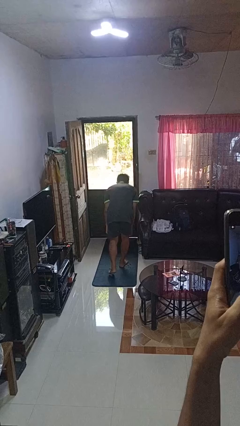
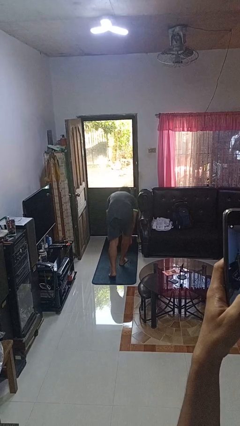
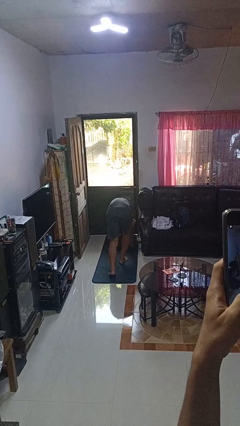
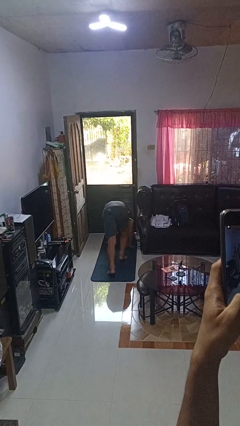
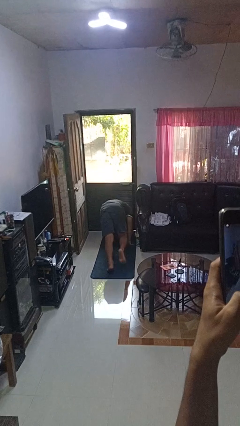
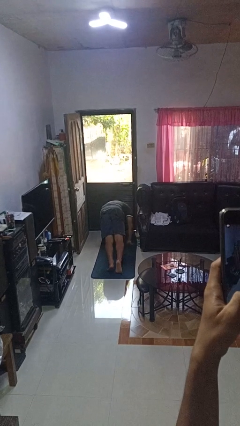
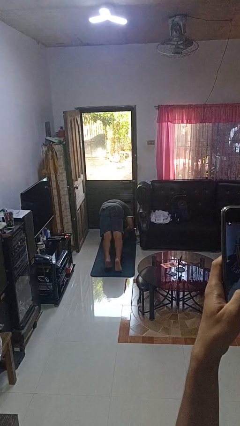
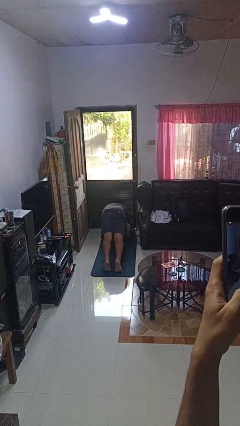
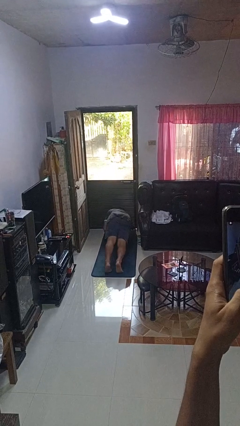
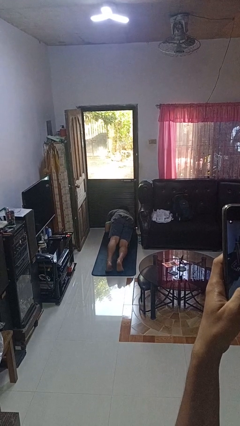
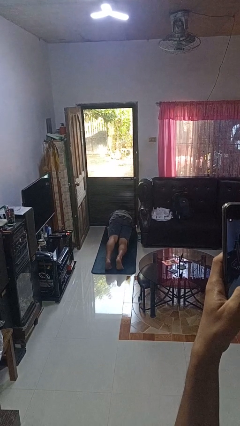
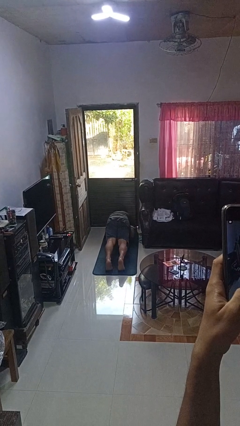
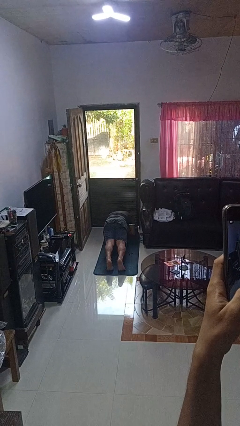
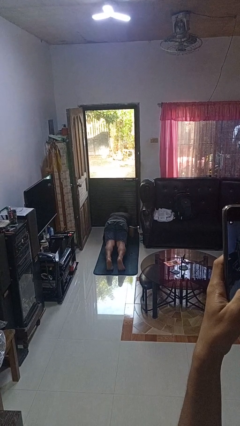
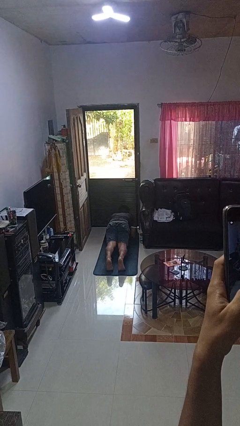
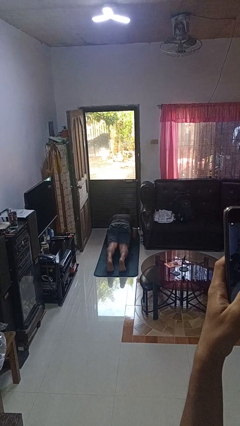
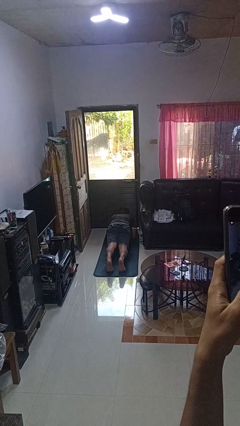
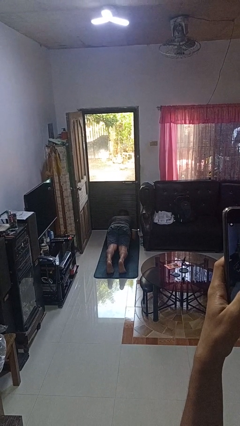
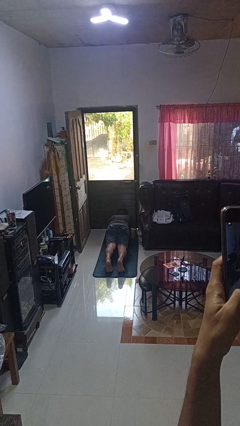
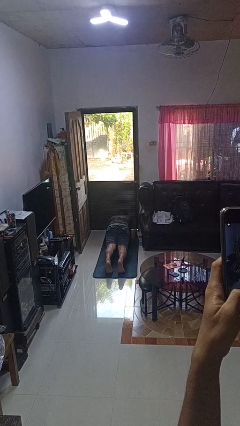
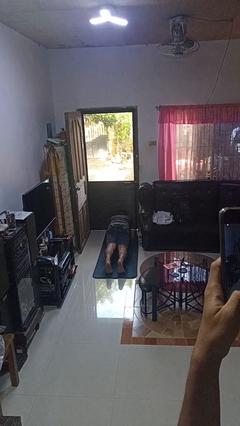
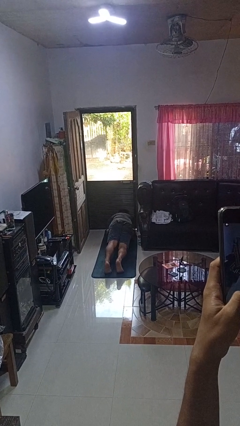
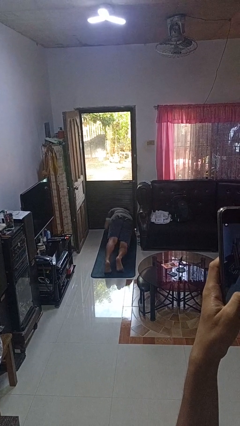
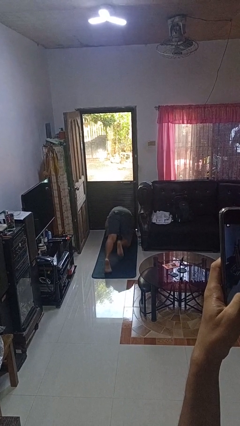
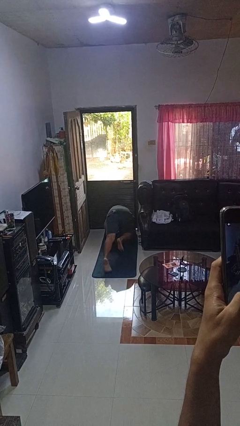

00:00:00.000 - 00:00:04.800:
person exercises with plank

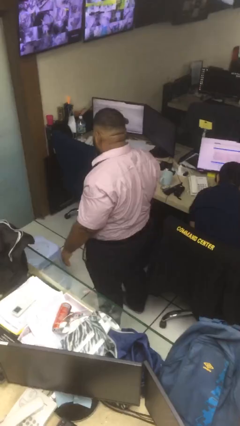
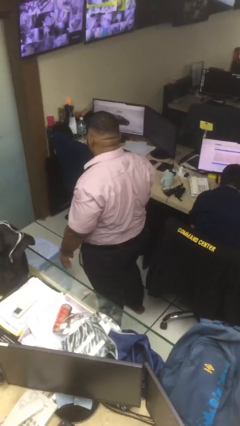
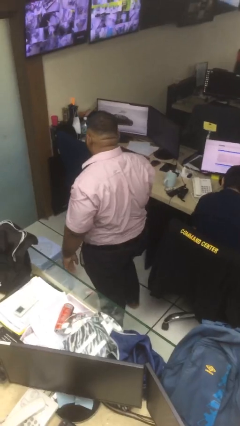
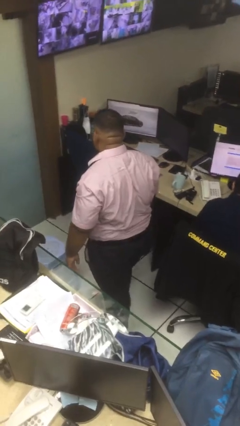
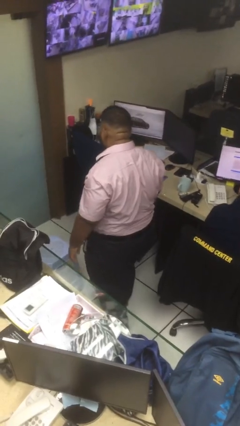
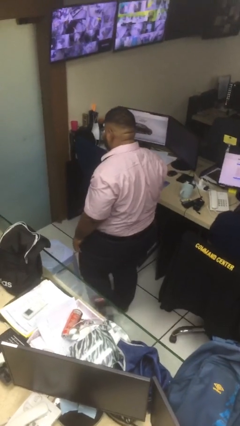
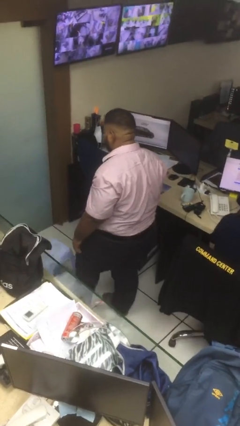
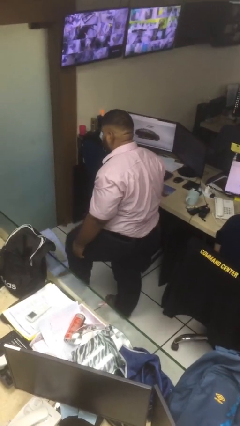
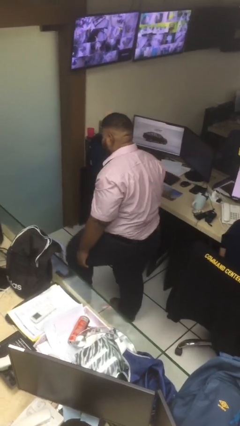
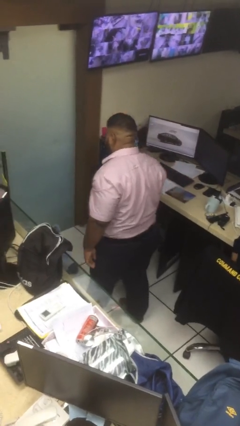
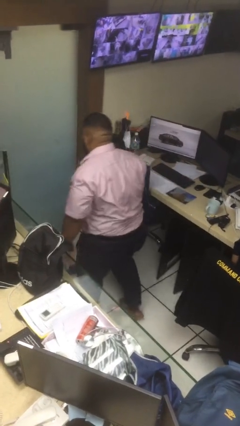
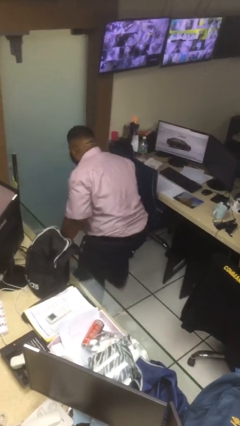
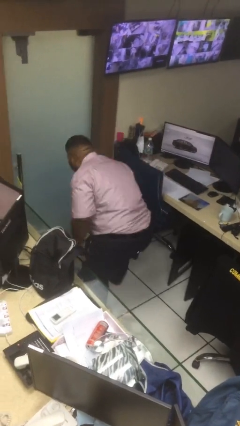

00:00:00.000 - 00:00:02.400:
person knocks over furniture

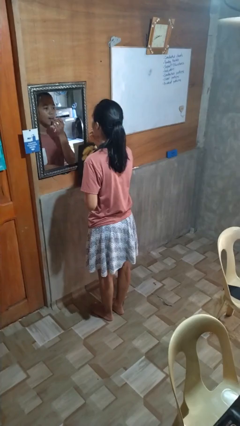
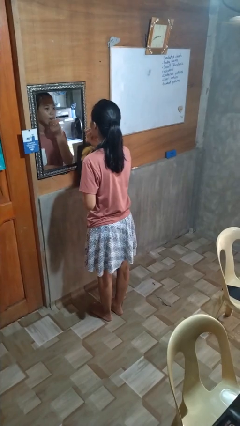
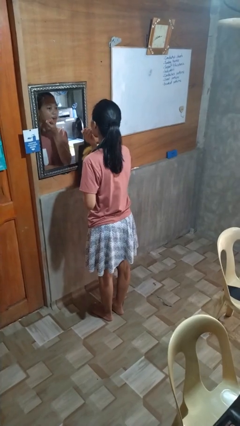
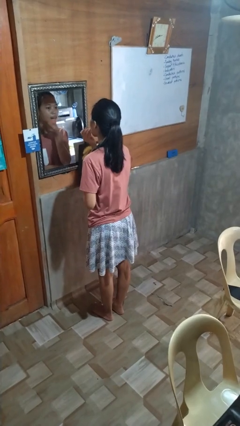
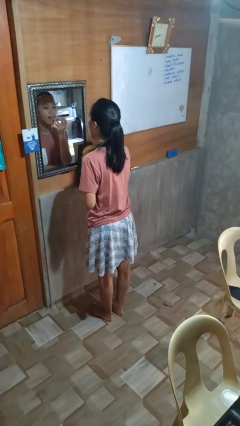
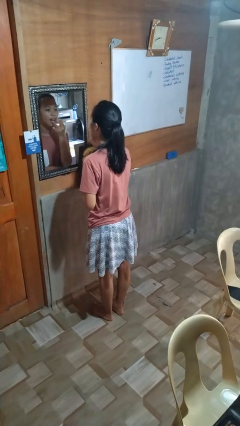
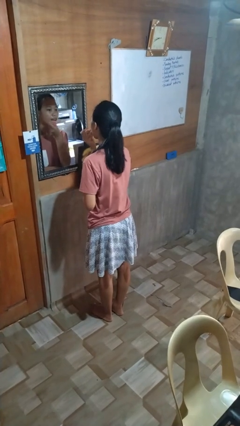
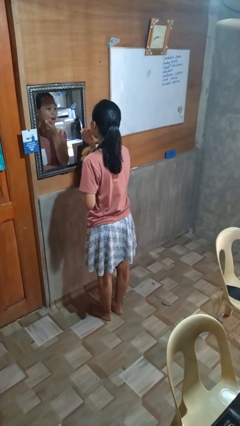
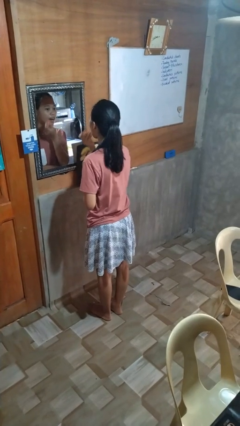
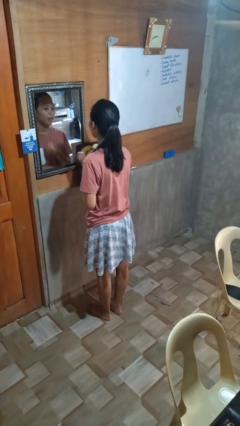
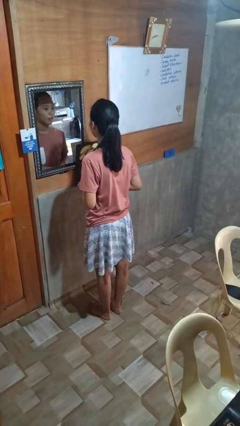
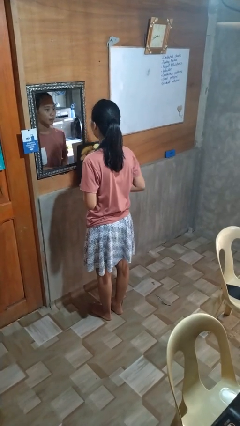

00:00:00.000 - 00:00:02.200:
person applies lip makeup

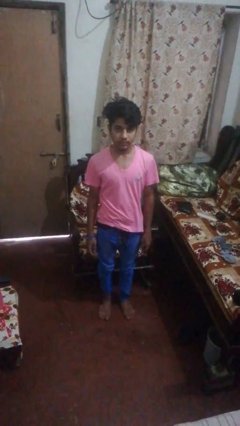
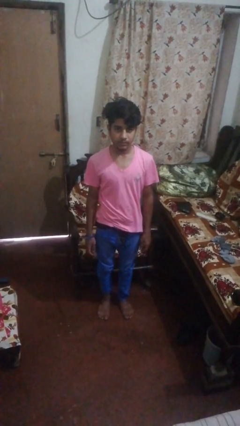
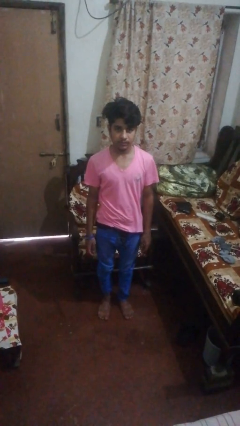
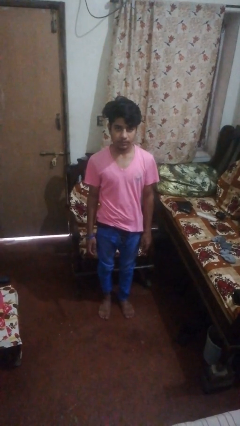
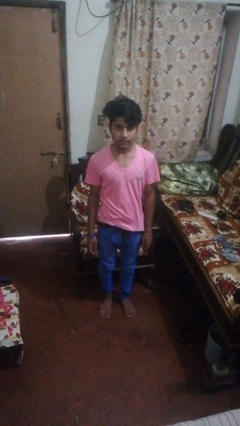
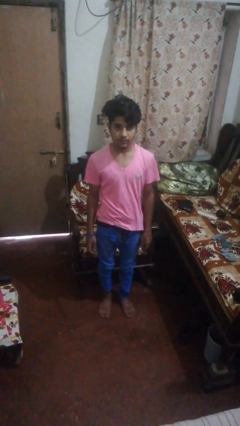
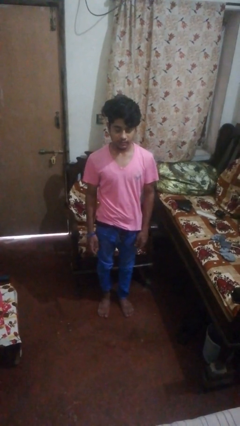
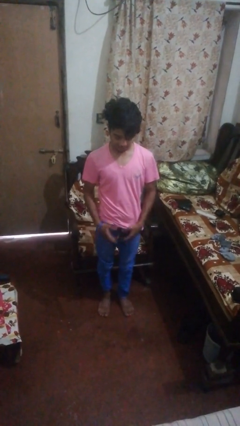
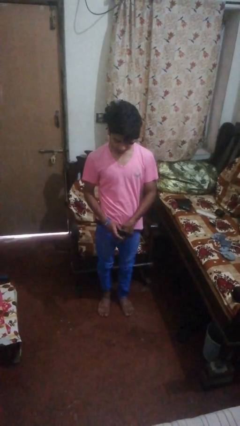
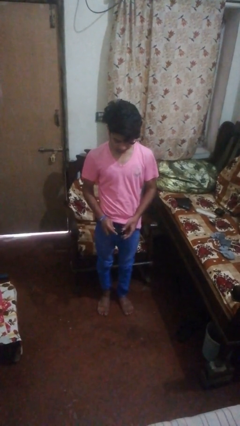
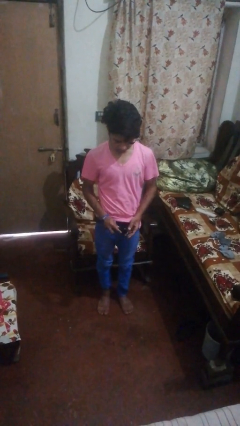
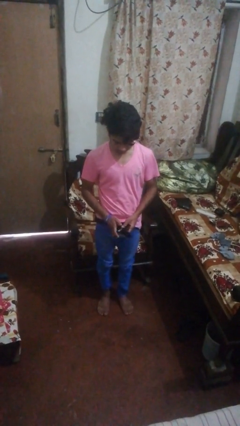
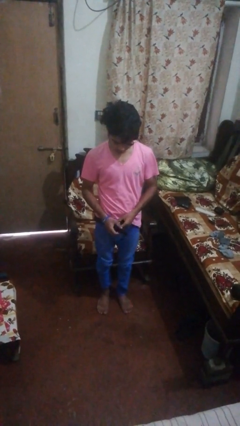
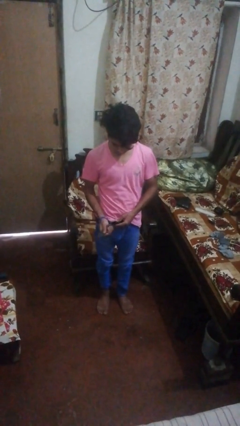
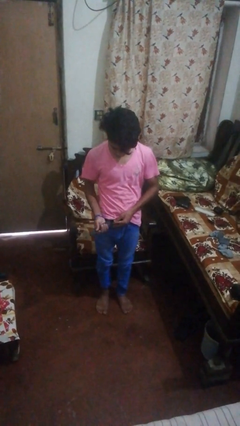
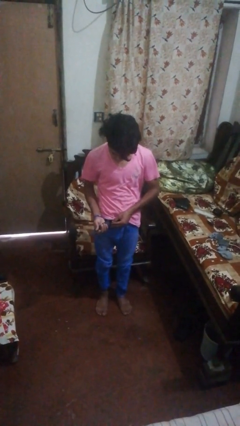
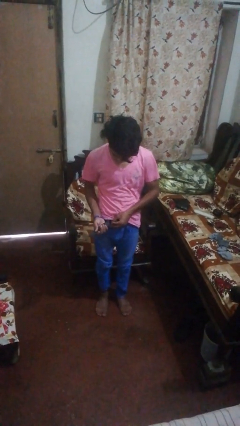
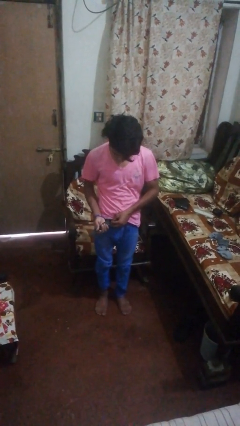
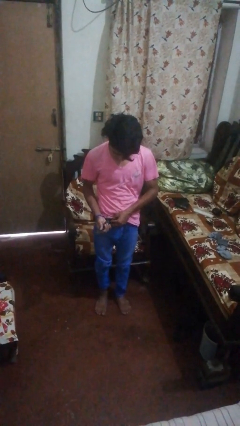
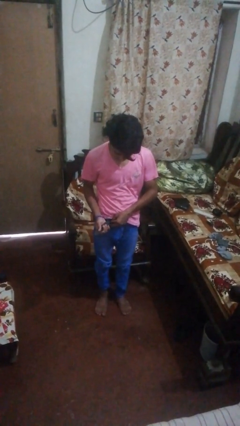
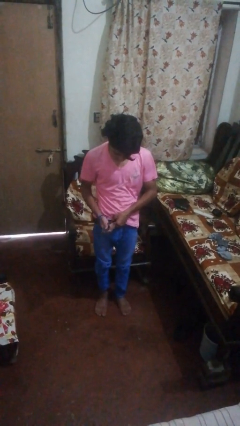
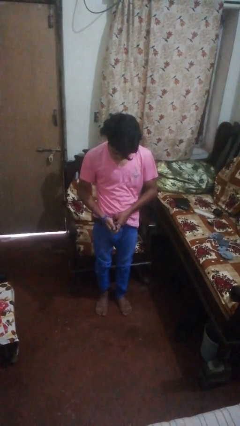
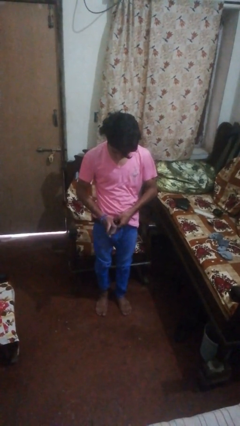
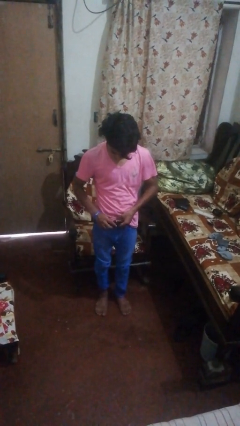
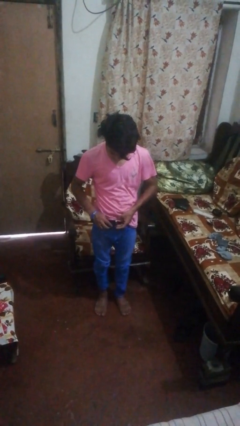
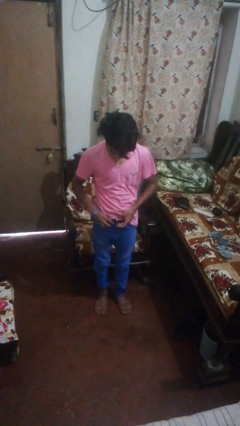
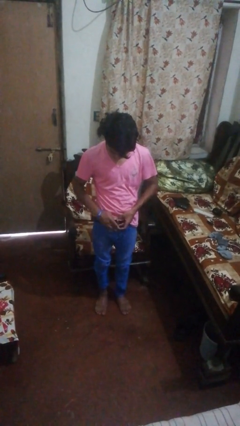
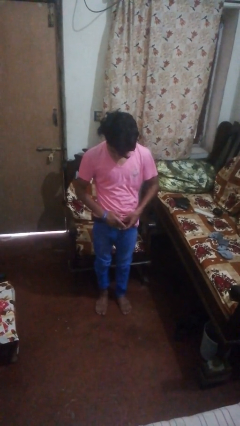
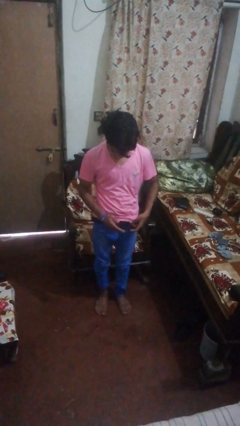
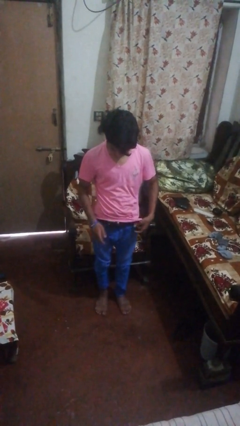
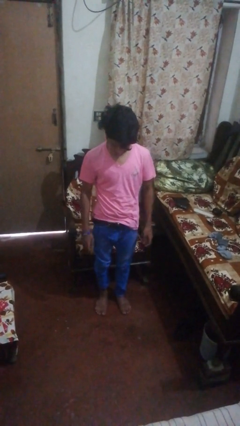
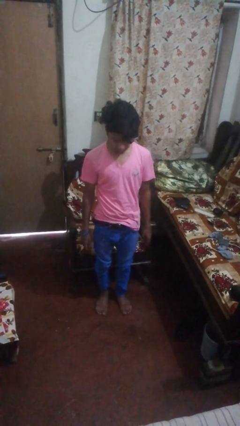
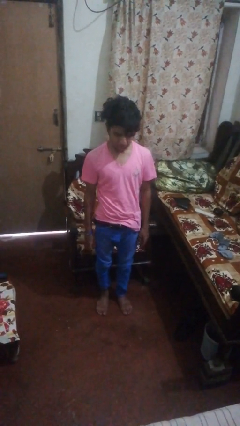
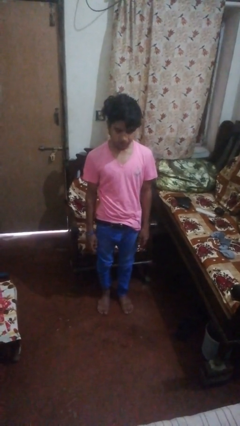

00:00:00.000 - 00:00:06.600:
person puts on belt

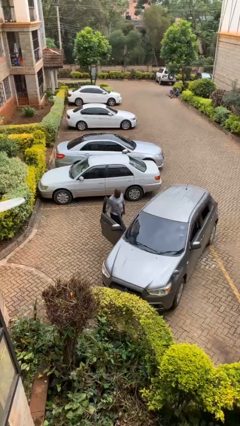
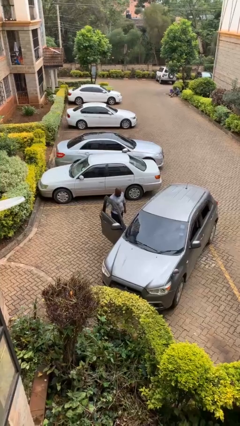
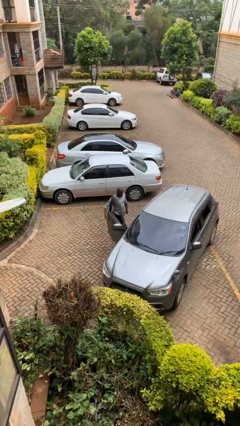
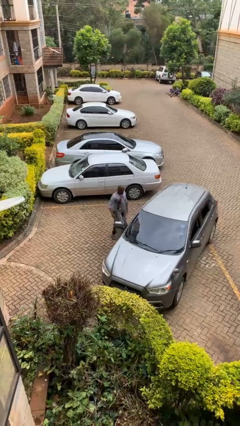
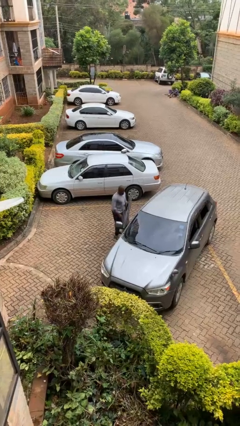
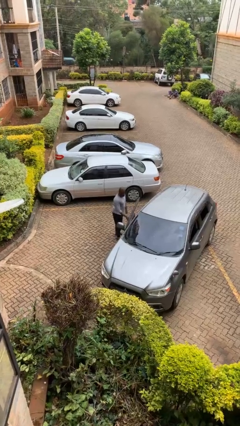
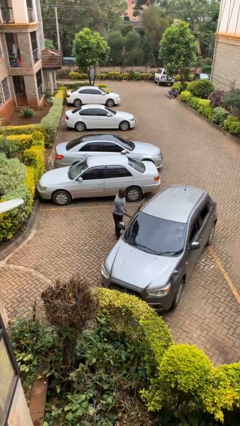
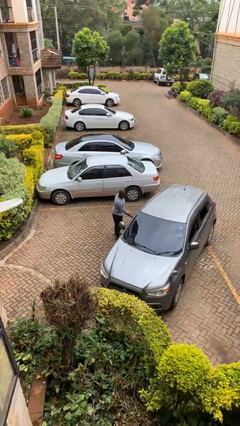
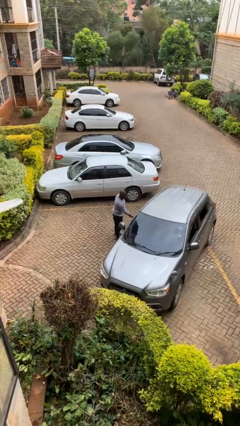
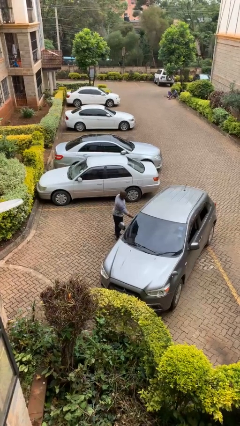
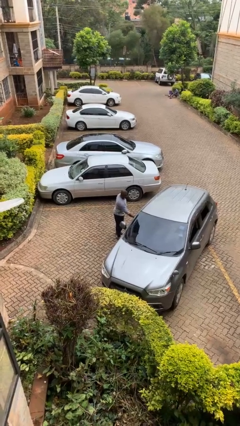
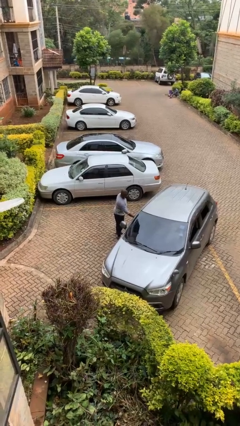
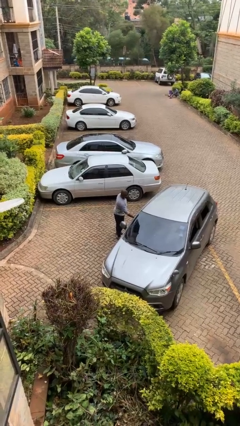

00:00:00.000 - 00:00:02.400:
person closes car door
